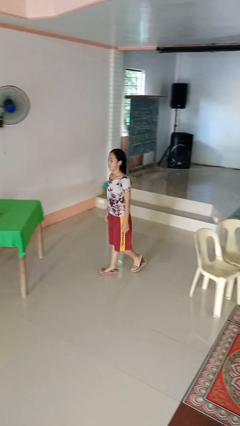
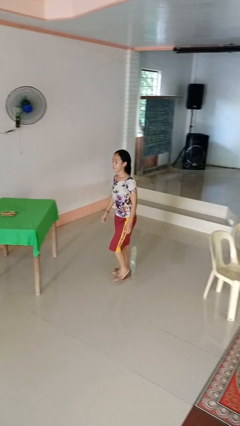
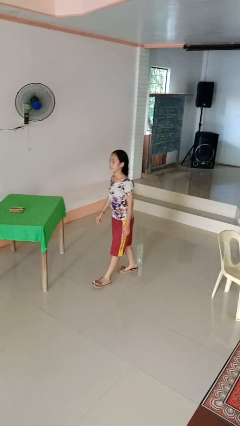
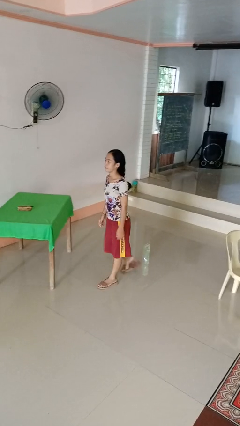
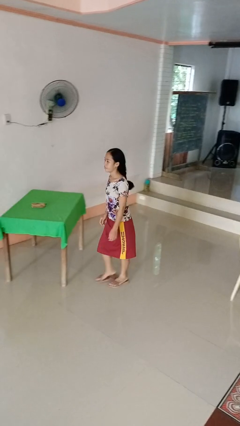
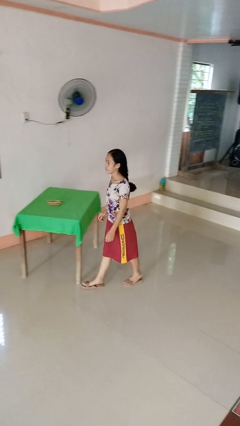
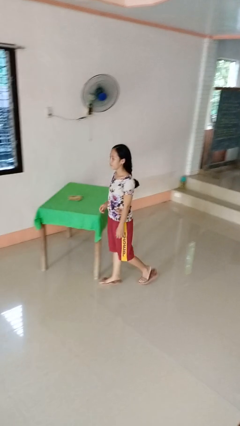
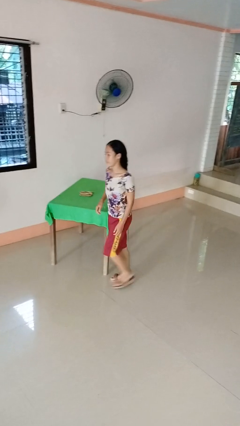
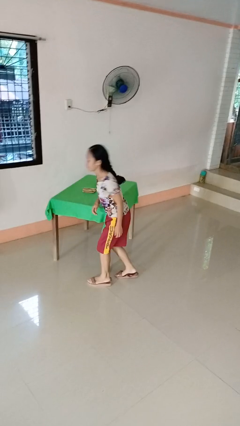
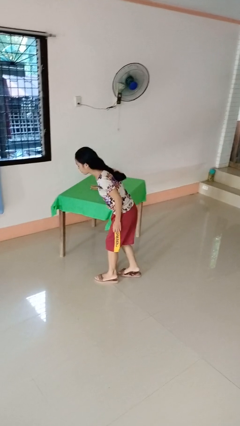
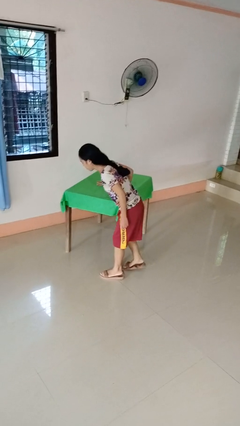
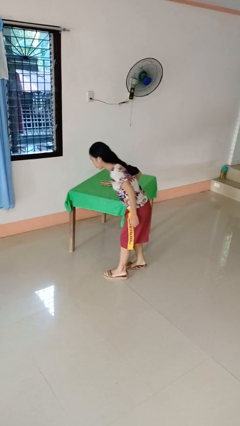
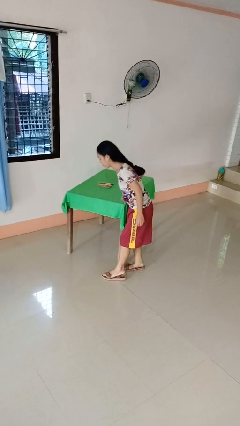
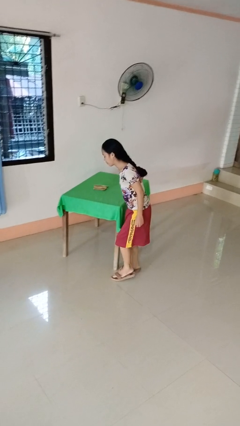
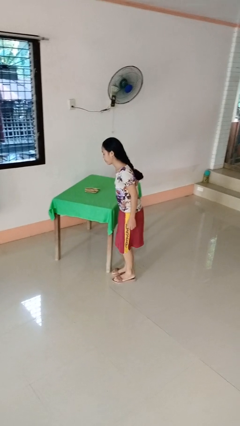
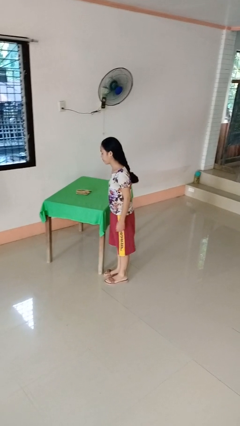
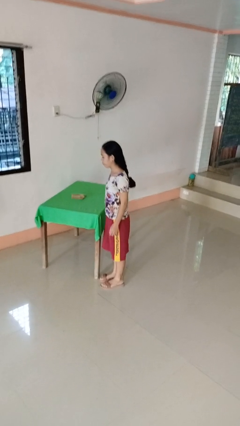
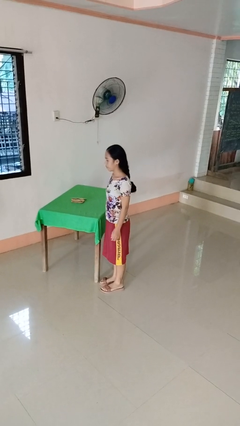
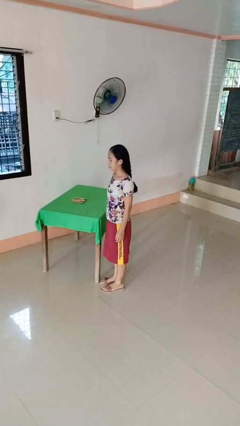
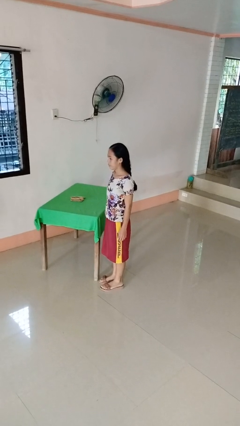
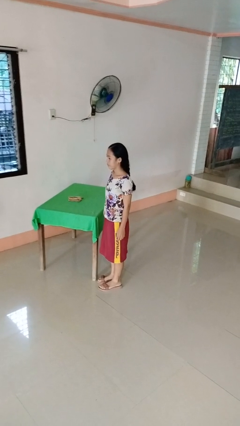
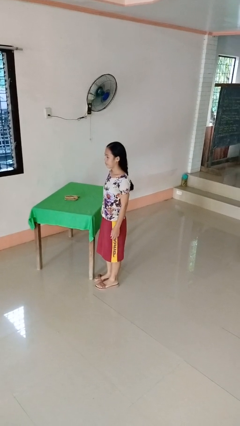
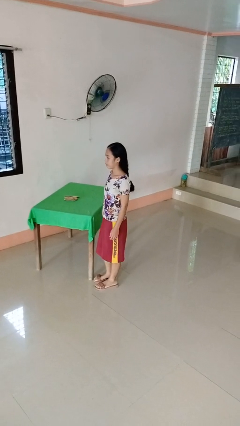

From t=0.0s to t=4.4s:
person bumps into table

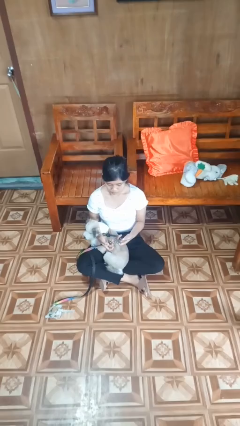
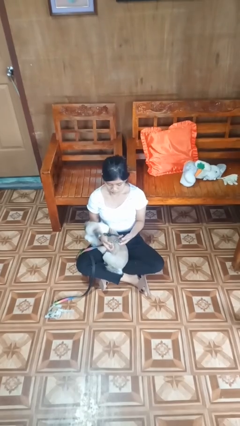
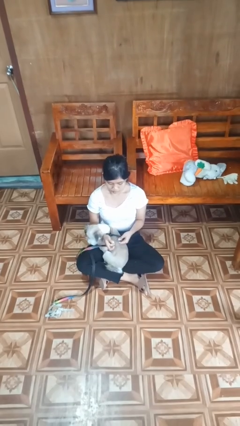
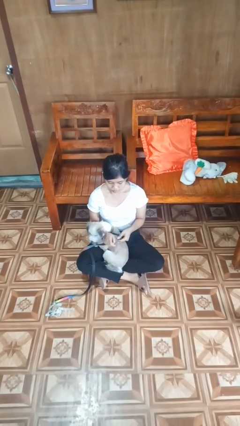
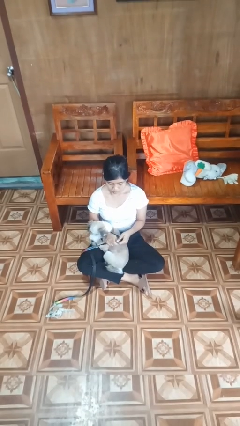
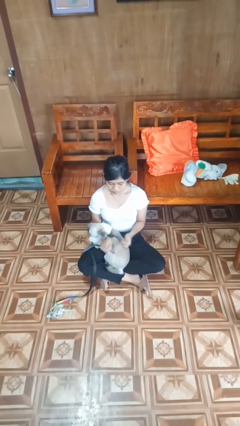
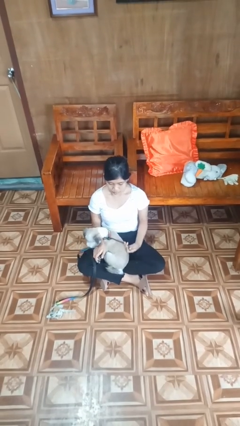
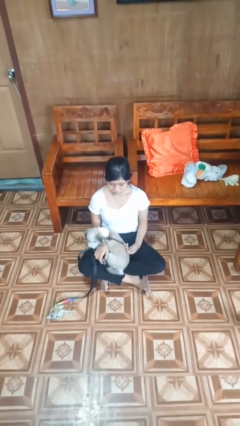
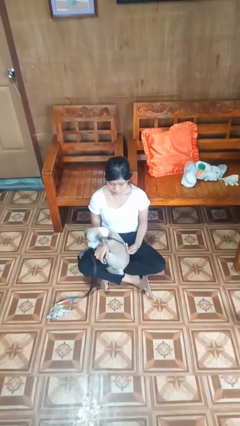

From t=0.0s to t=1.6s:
person unattaches leash from dog

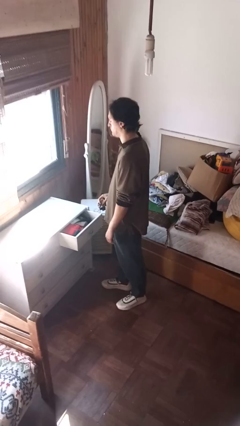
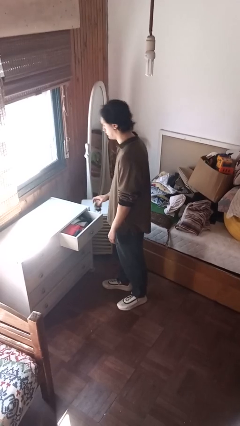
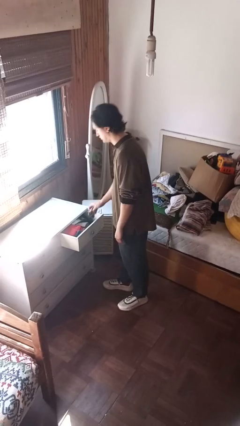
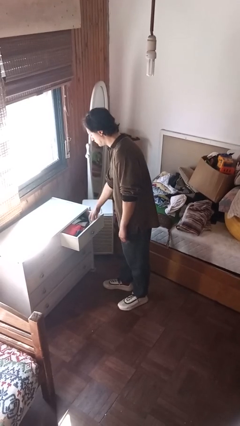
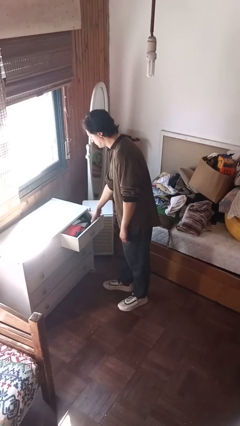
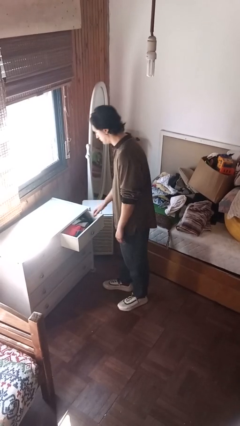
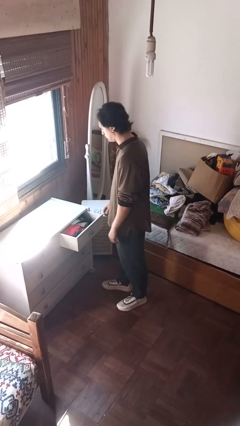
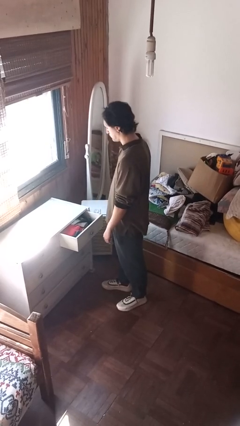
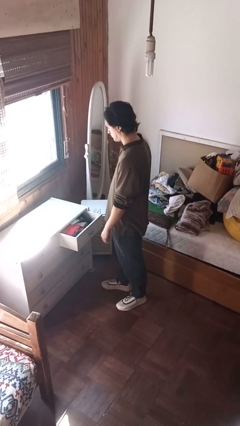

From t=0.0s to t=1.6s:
person puts clothes into dresser

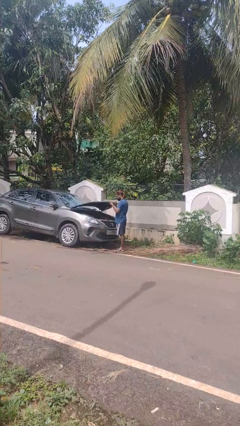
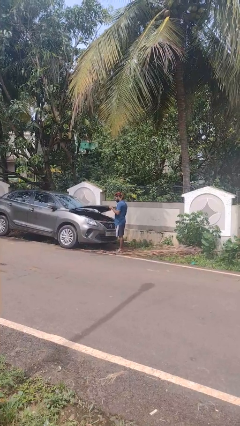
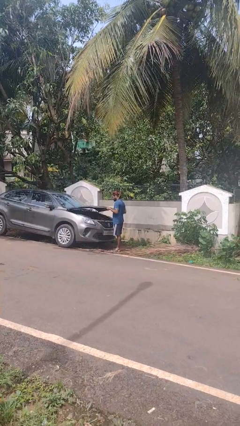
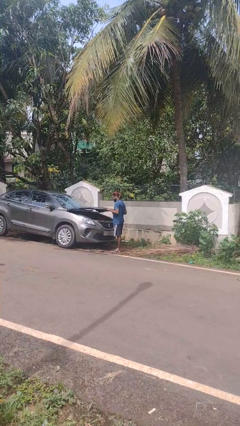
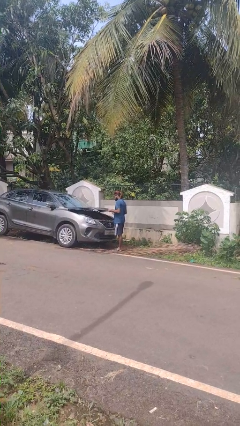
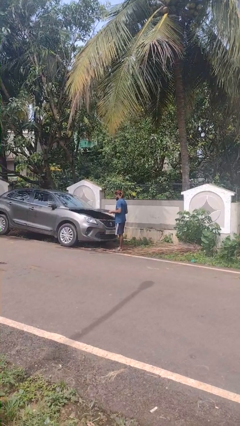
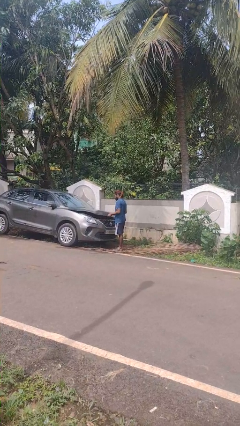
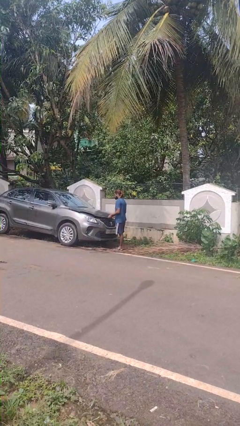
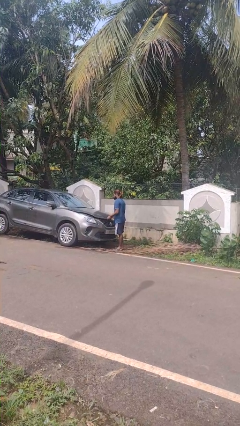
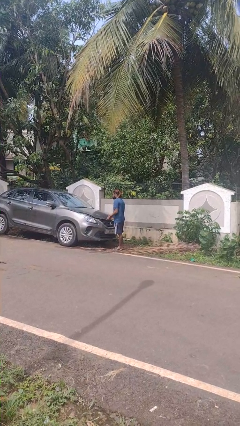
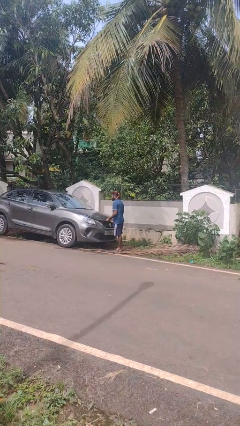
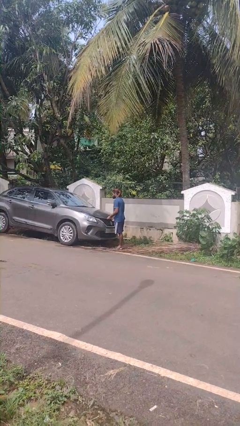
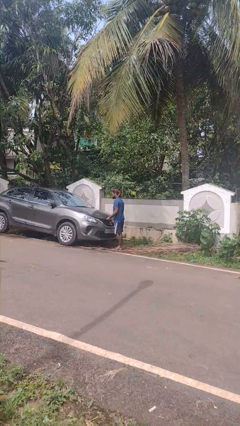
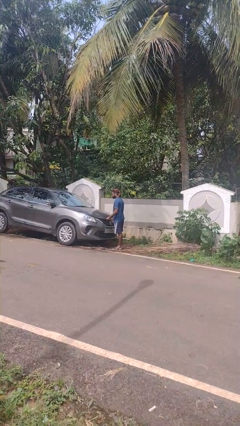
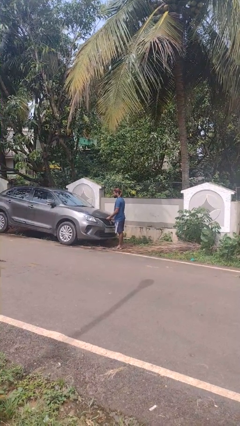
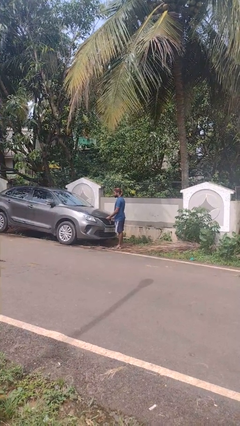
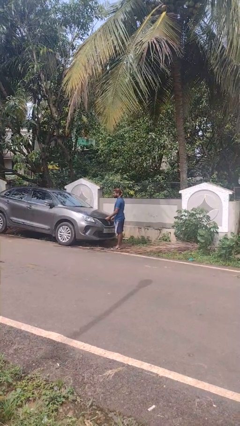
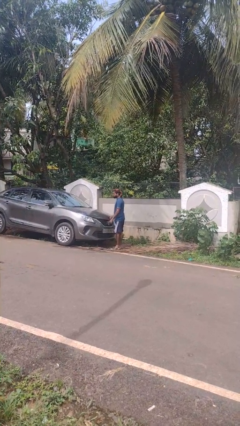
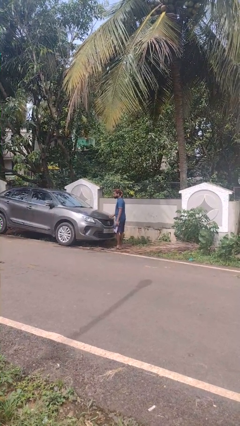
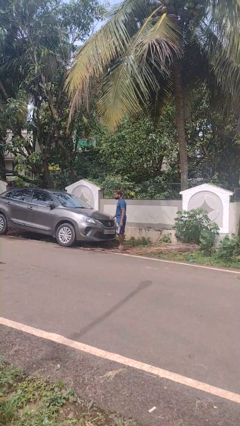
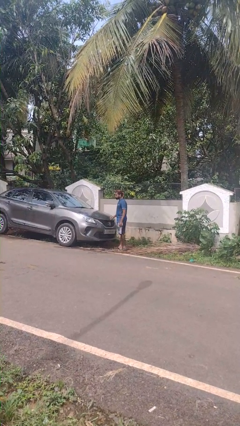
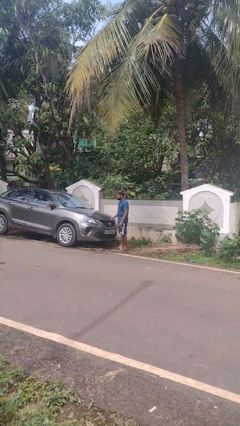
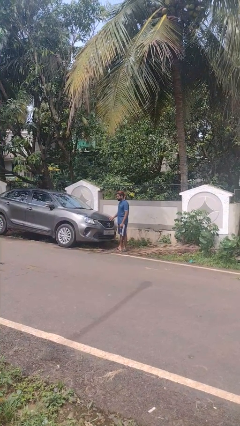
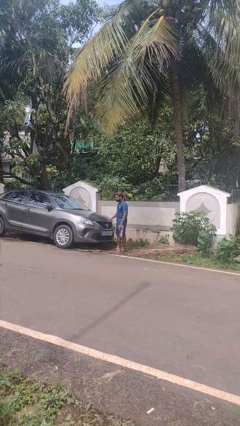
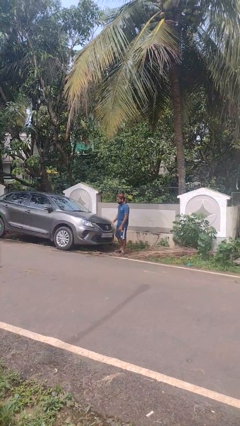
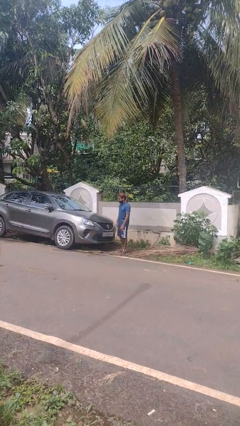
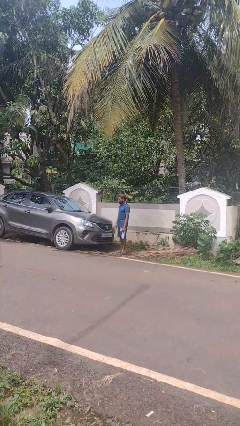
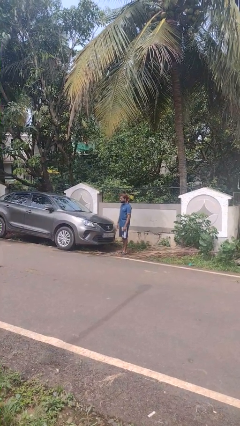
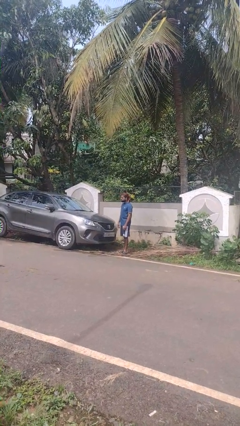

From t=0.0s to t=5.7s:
person closes car hood

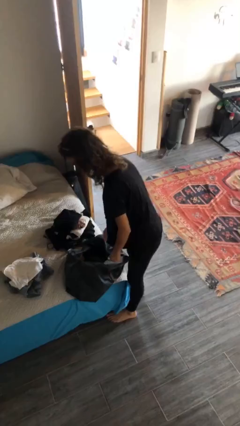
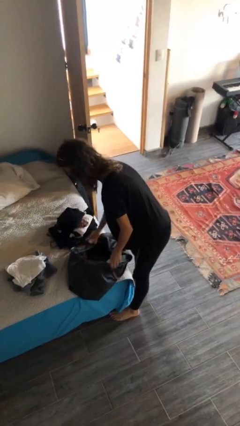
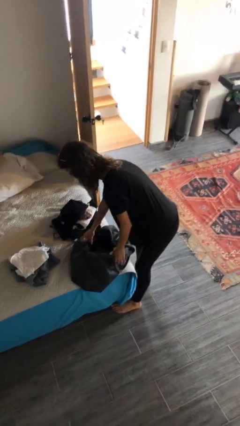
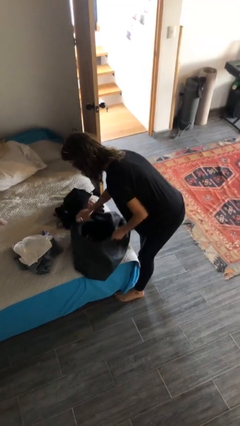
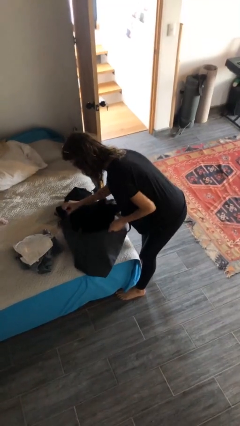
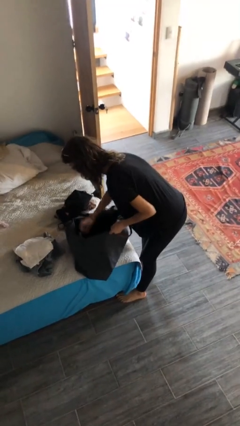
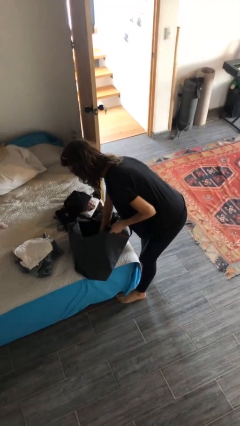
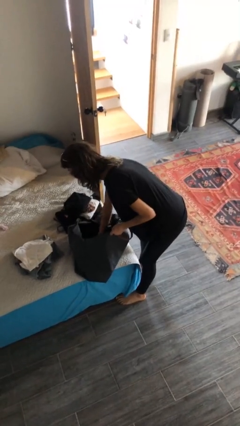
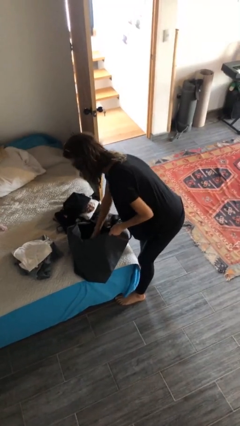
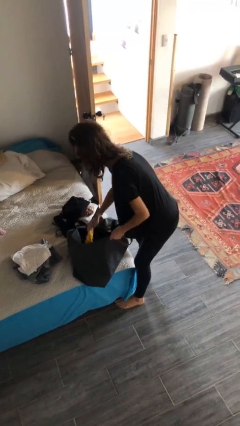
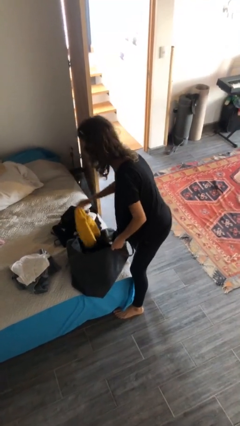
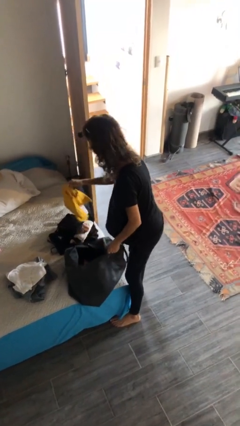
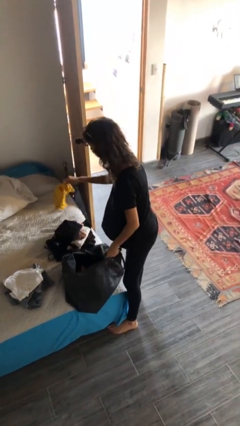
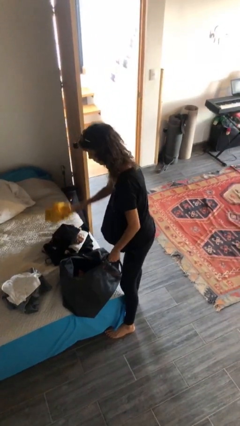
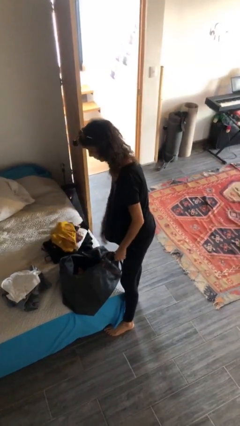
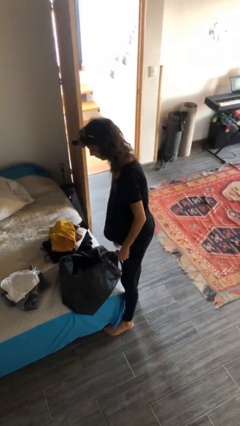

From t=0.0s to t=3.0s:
person unloads clothes from suitcase

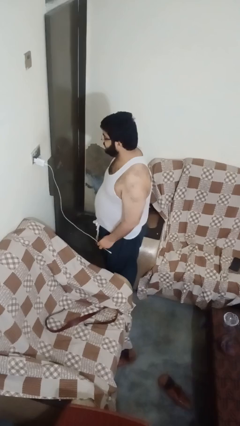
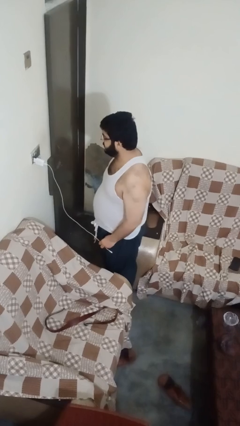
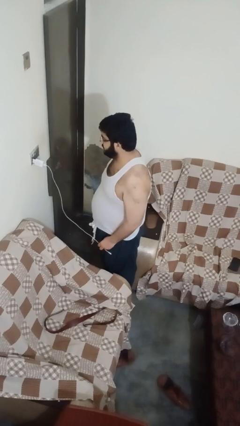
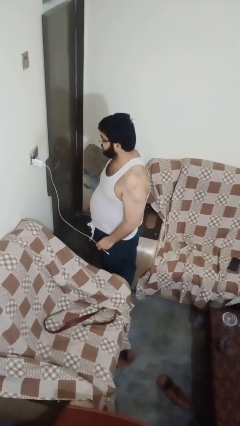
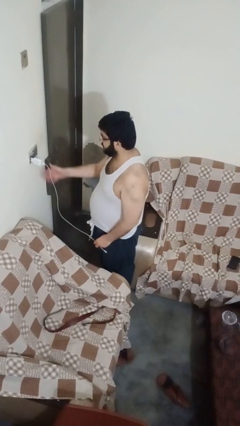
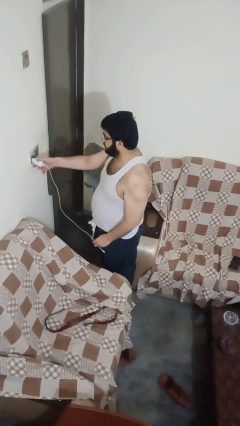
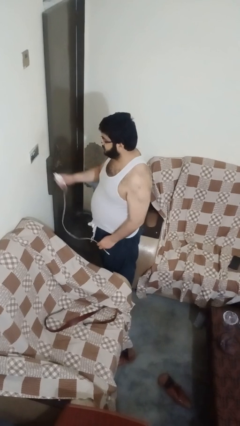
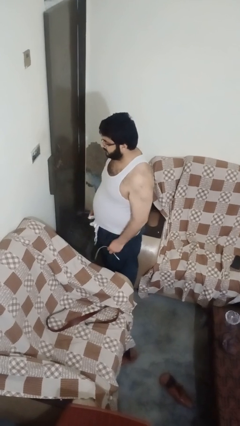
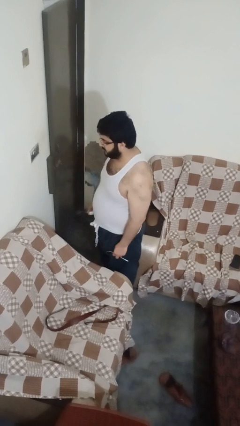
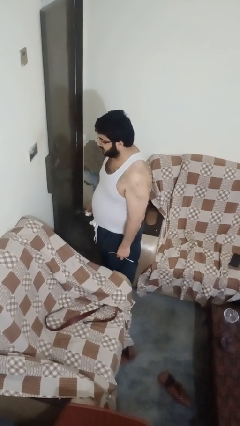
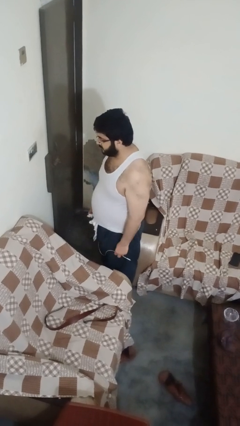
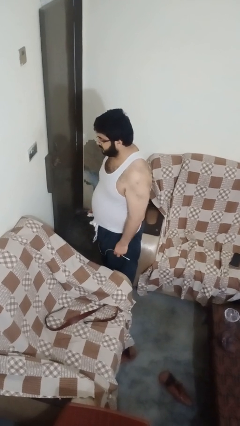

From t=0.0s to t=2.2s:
person unplugs from electrical socket
